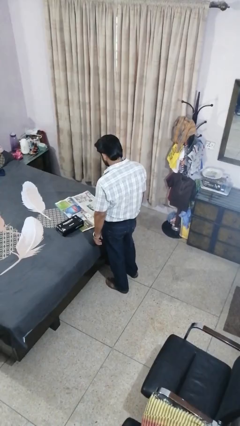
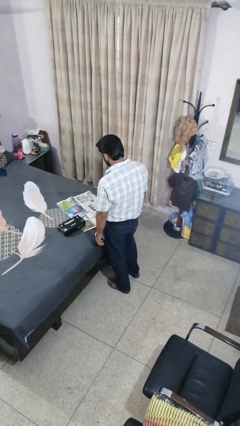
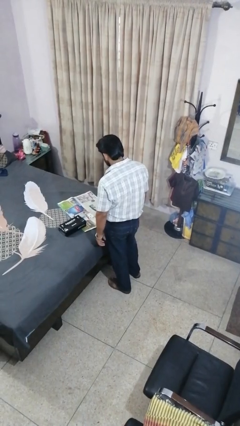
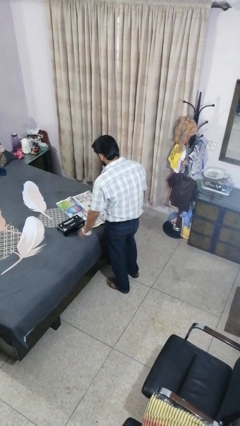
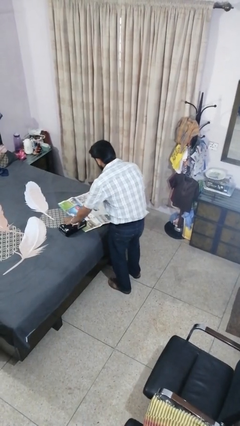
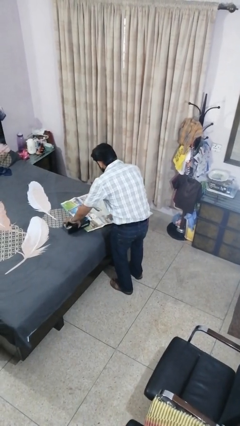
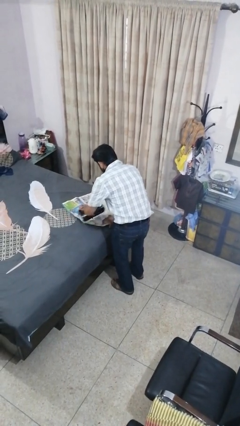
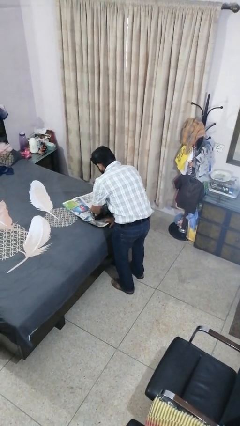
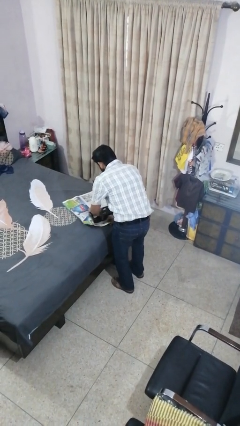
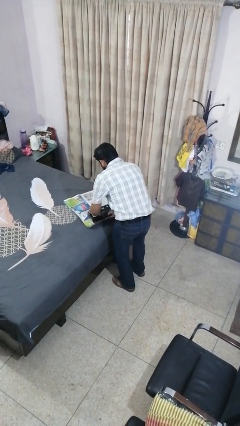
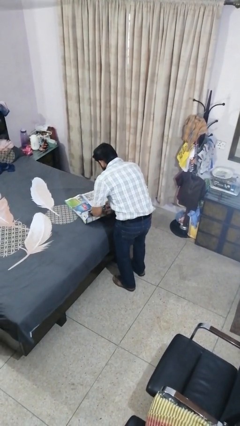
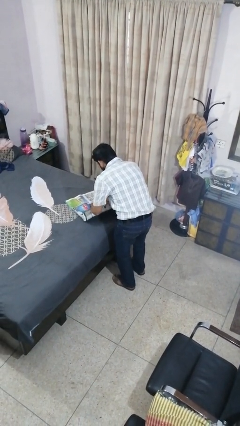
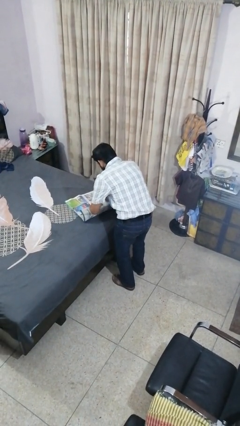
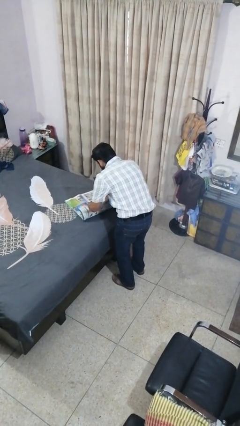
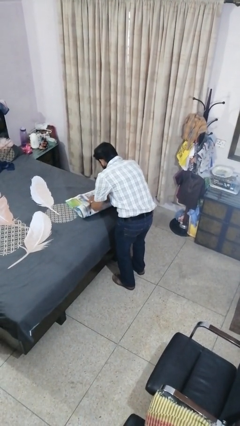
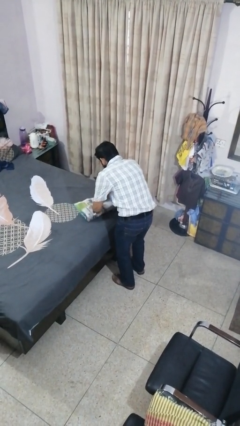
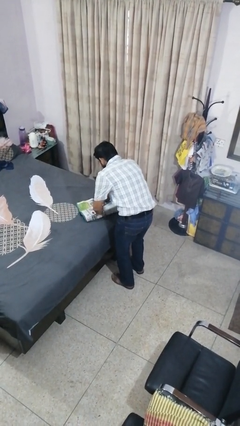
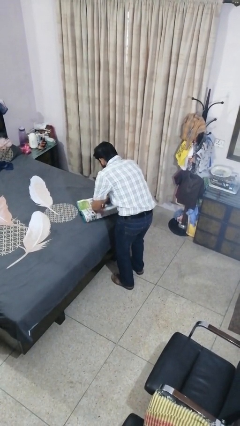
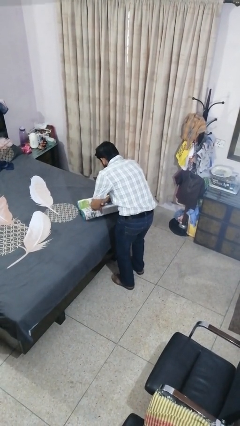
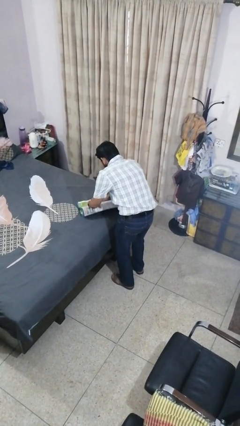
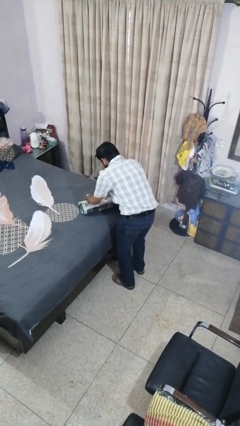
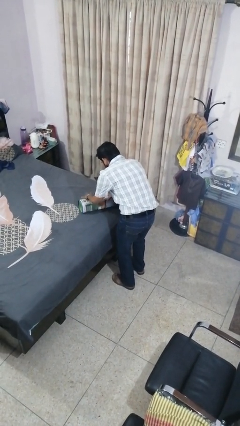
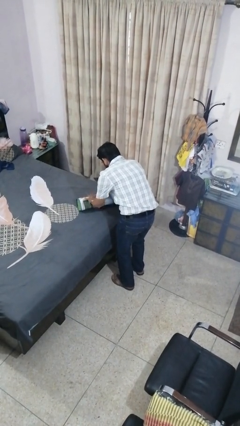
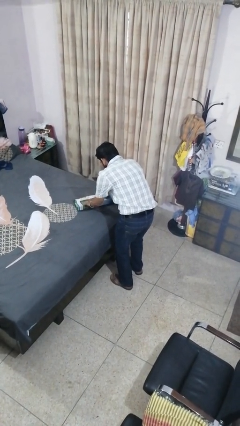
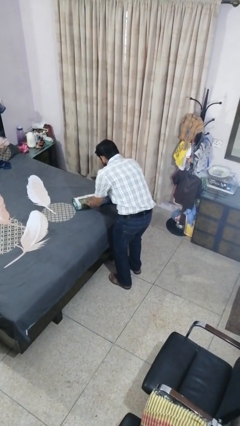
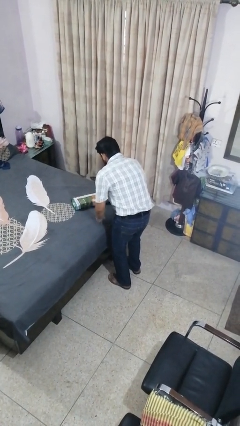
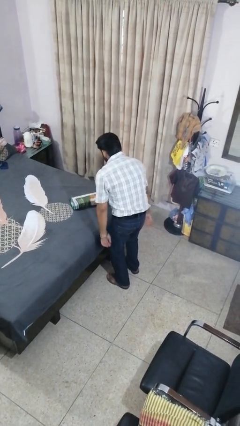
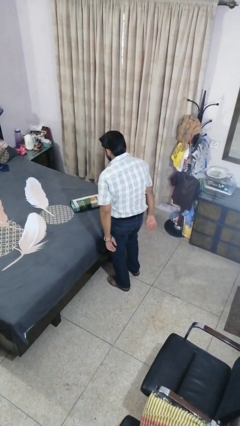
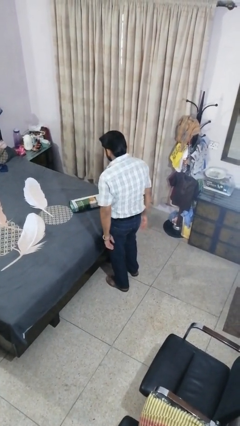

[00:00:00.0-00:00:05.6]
person wraps box

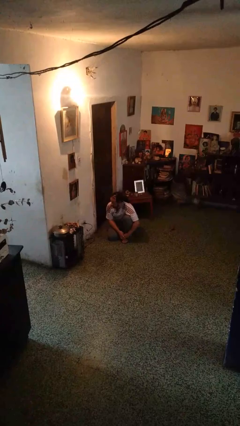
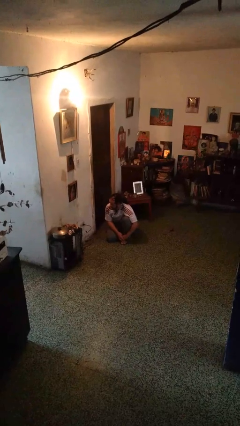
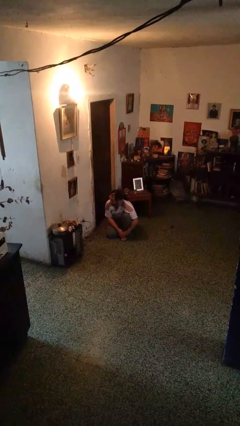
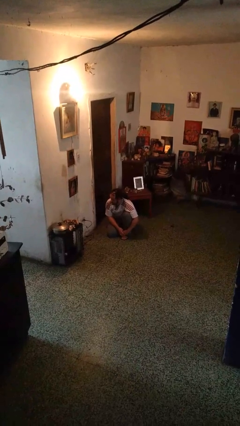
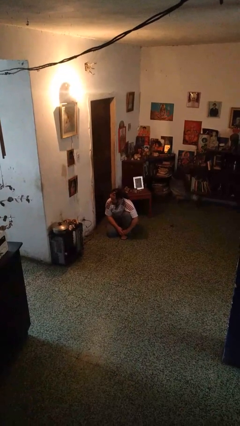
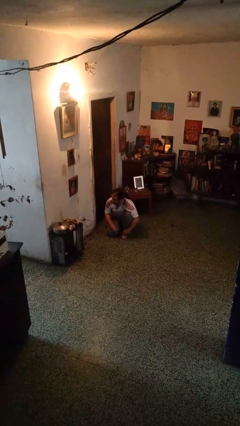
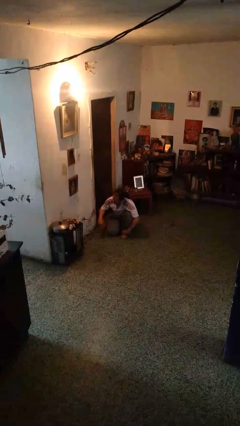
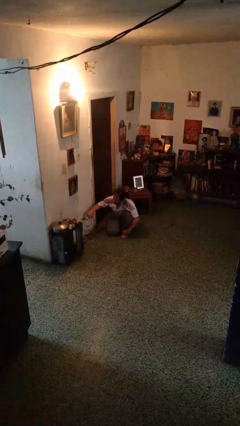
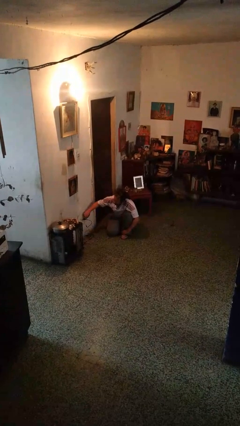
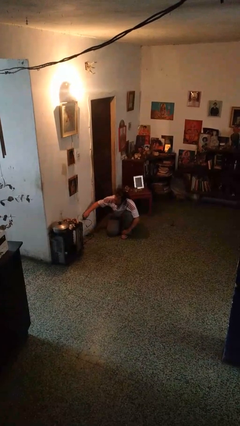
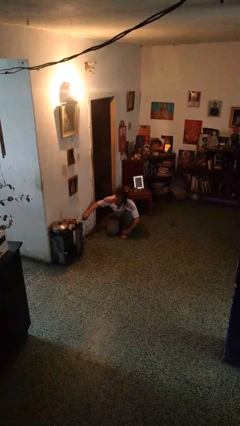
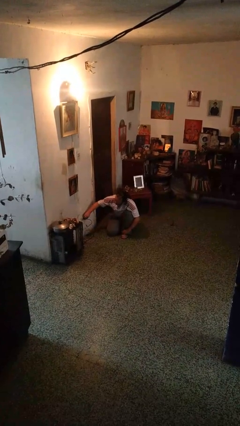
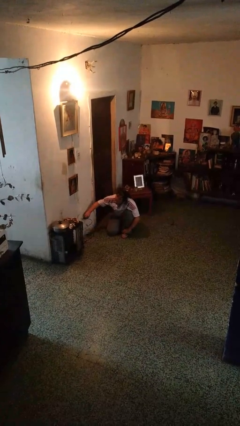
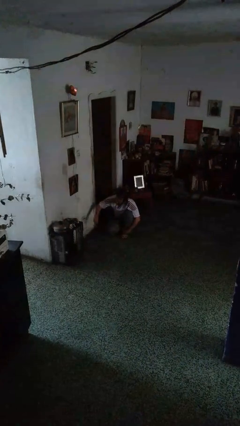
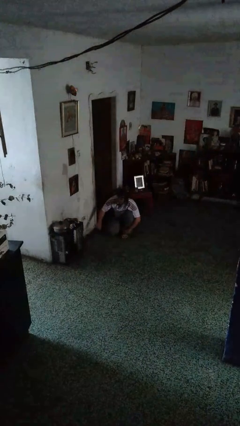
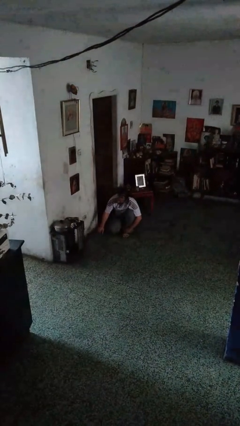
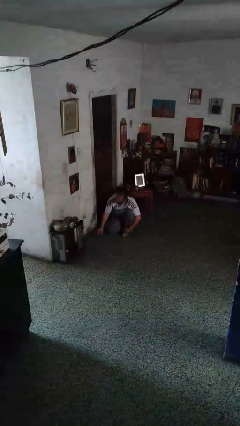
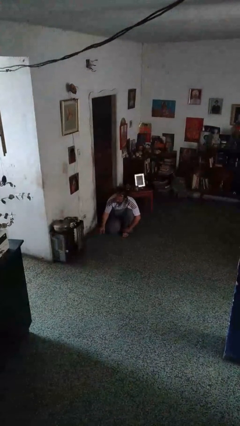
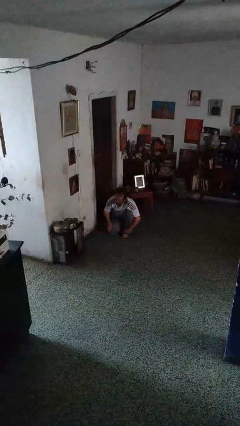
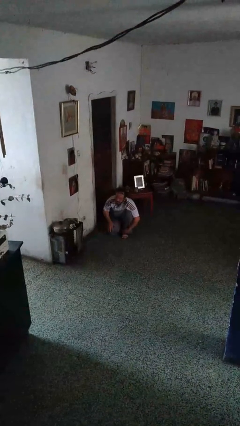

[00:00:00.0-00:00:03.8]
person unplugs from electrical socket

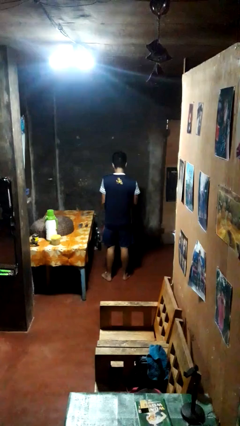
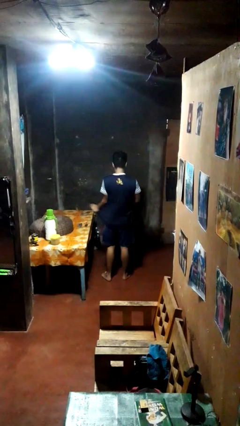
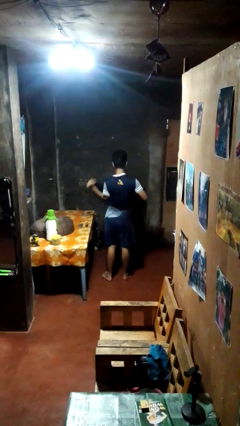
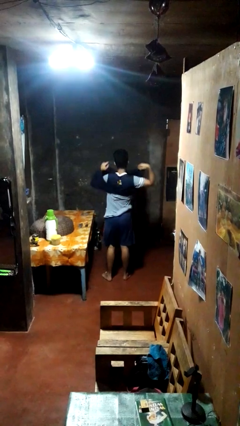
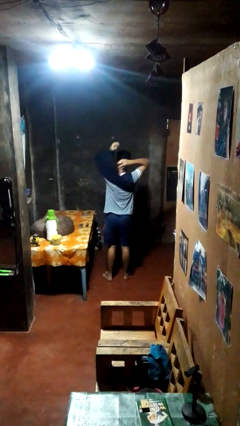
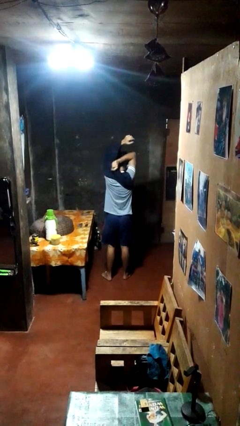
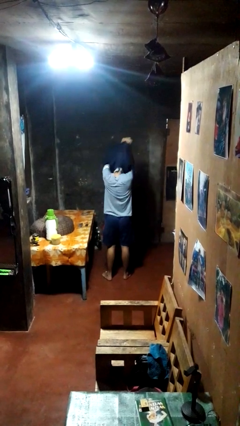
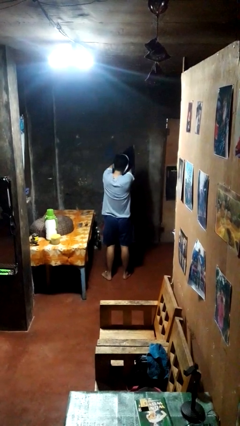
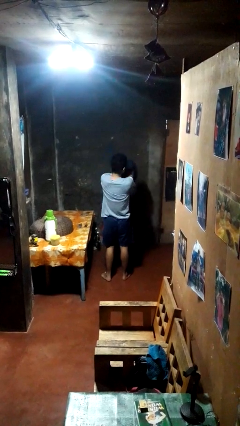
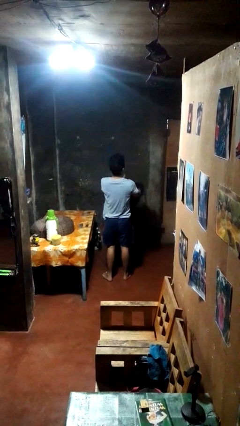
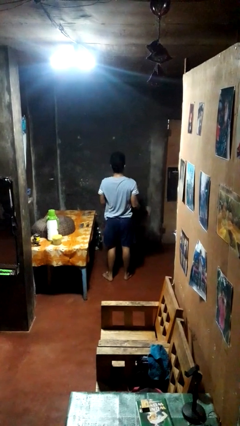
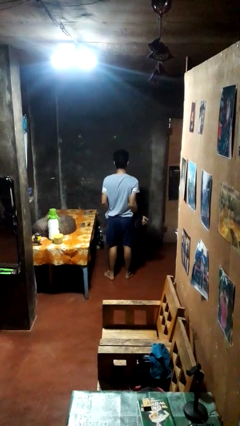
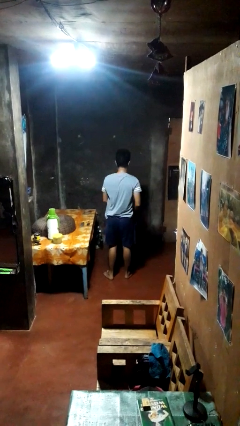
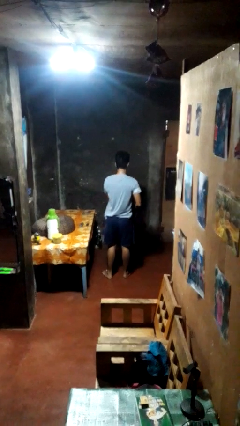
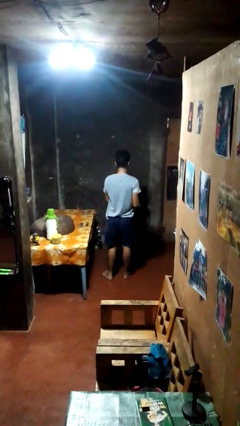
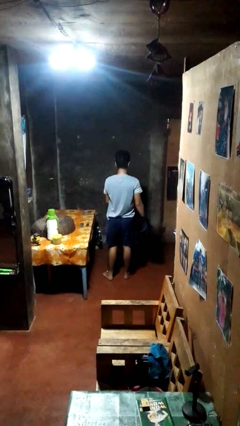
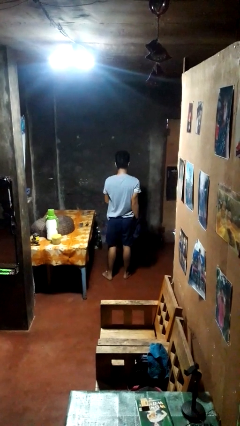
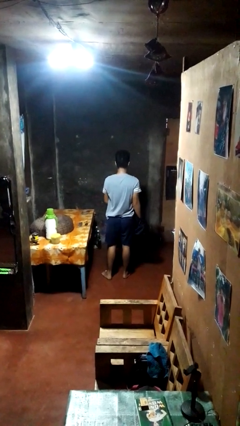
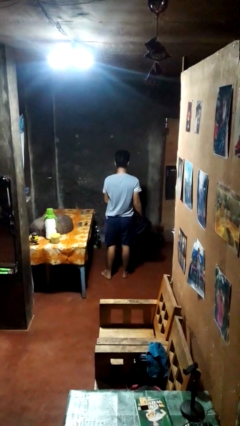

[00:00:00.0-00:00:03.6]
person takes off shirt

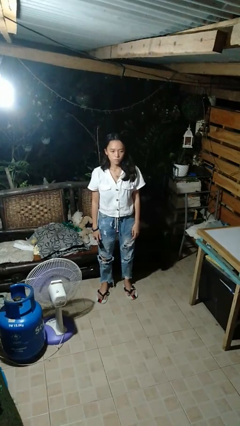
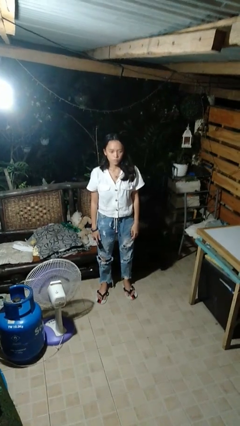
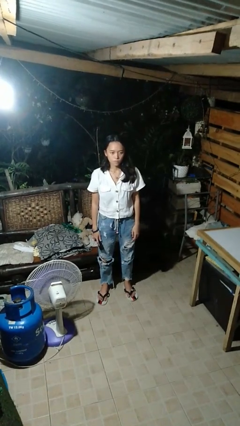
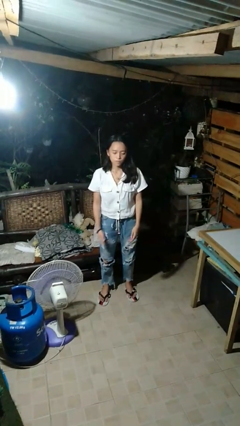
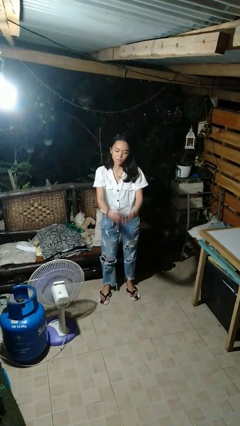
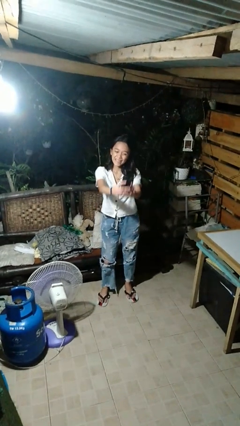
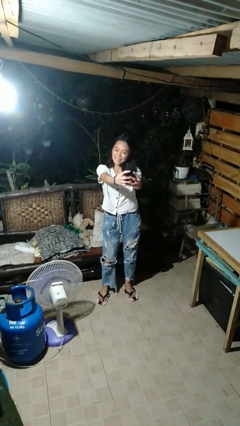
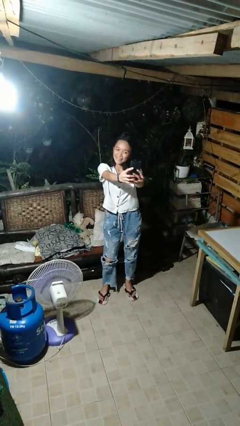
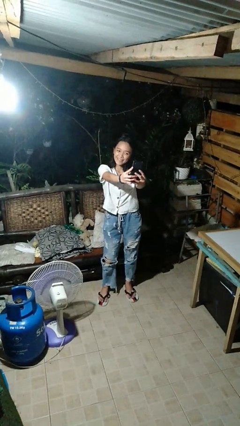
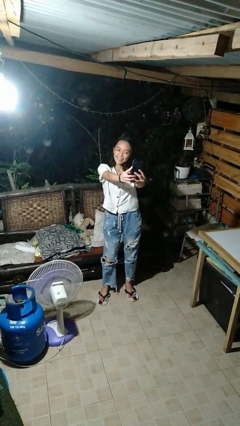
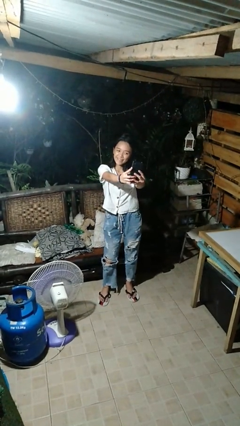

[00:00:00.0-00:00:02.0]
person takes selfie

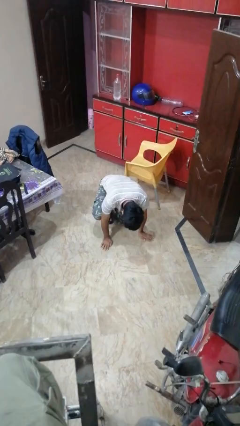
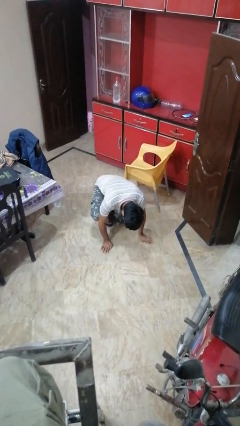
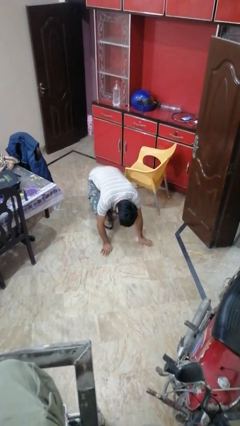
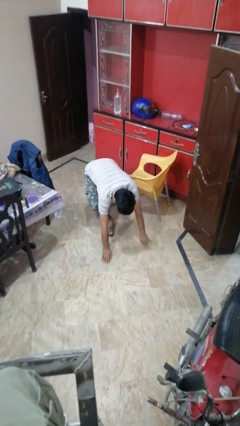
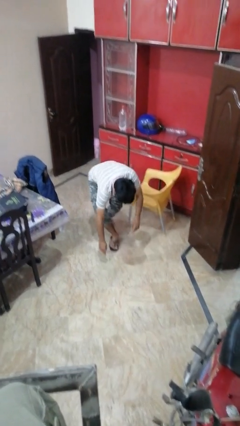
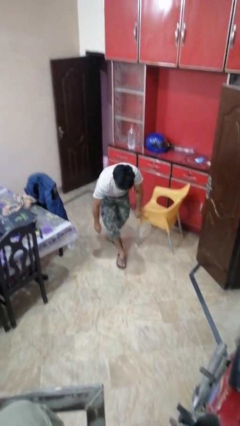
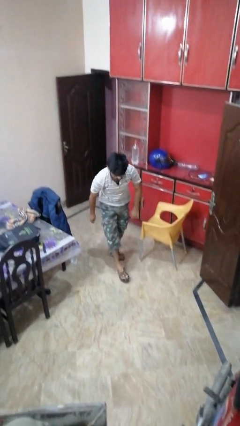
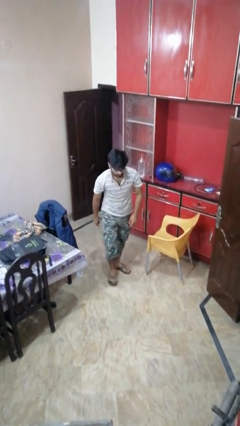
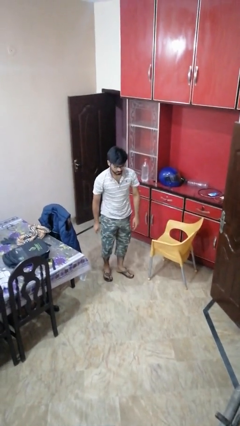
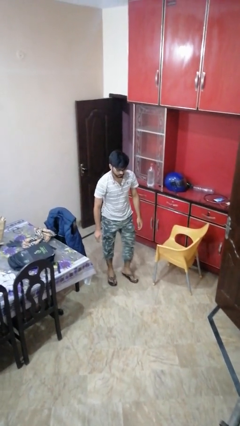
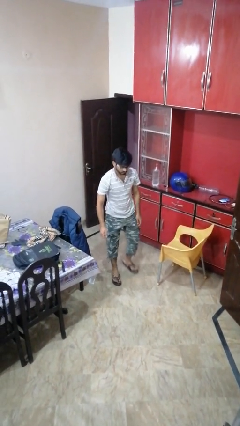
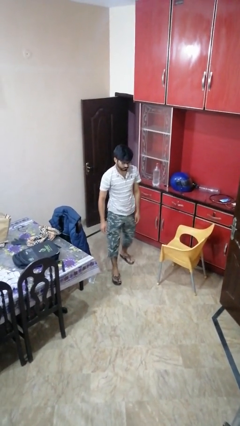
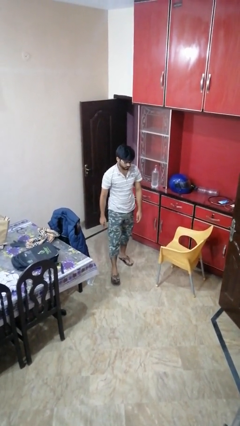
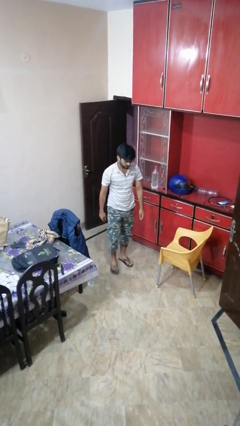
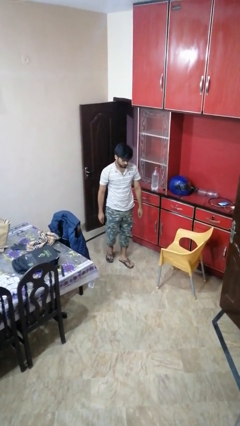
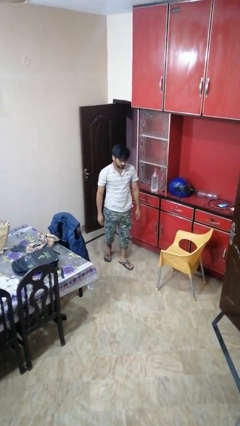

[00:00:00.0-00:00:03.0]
person stands up from floor
